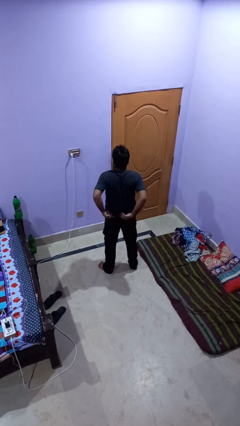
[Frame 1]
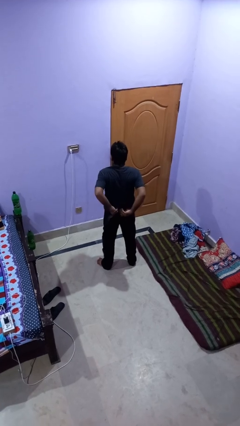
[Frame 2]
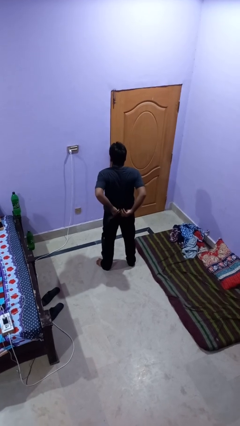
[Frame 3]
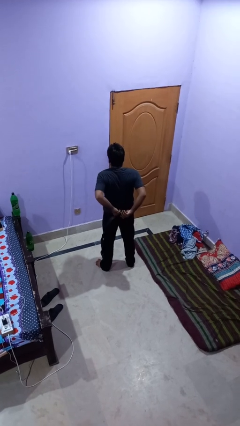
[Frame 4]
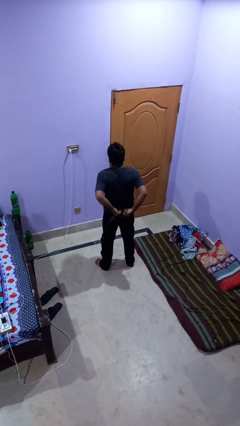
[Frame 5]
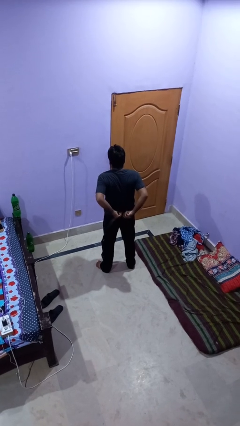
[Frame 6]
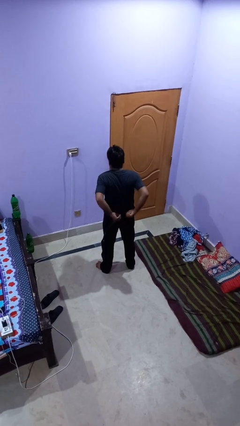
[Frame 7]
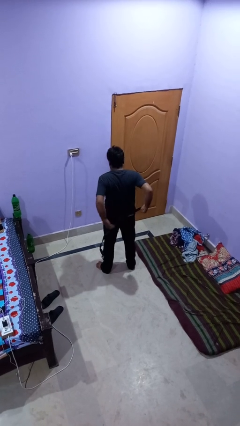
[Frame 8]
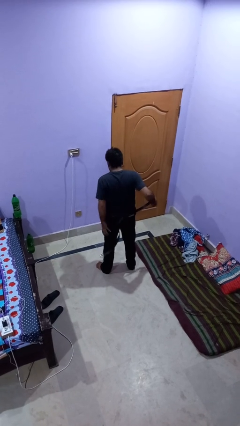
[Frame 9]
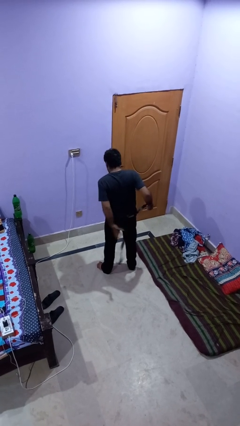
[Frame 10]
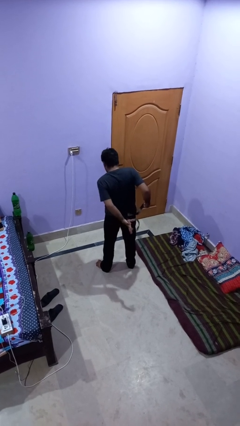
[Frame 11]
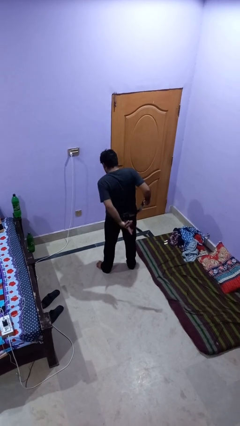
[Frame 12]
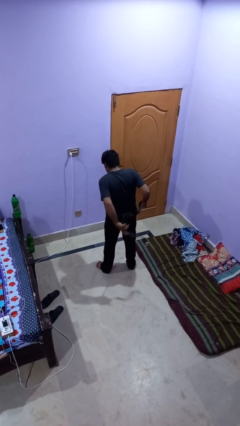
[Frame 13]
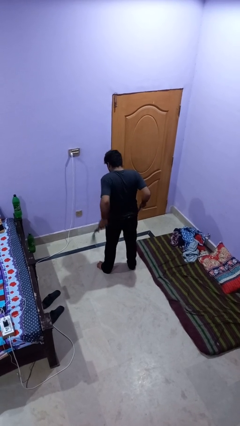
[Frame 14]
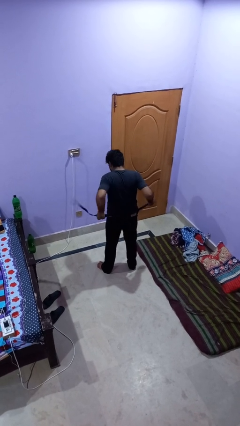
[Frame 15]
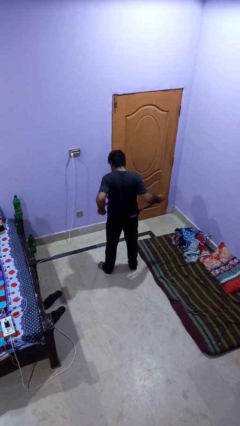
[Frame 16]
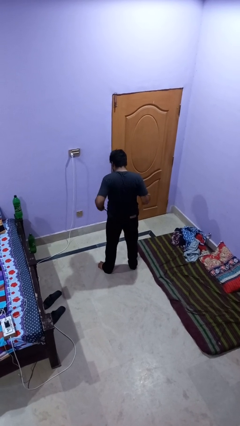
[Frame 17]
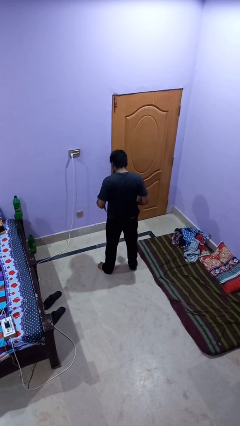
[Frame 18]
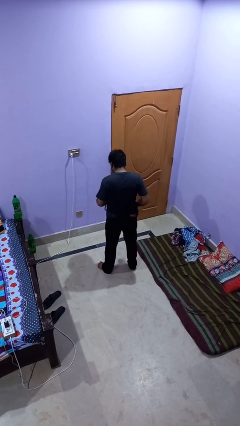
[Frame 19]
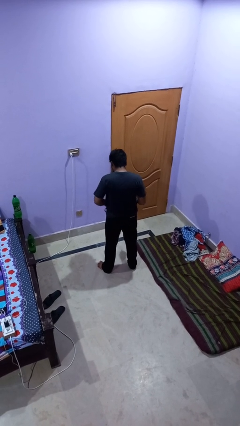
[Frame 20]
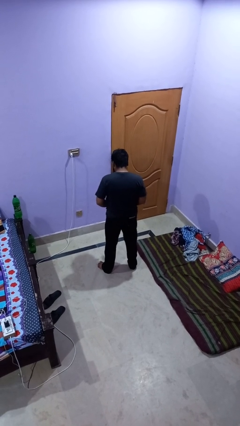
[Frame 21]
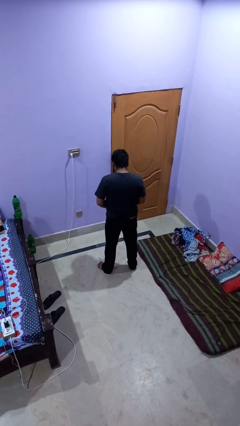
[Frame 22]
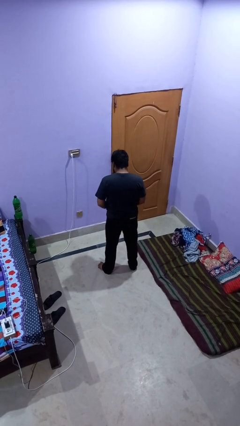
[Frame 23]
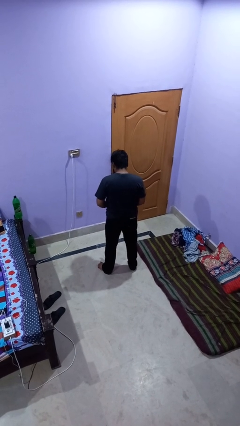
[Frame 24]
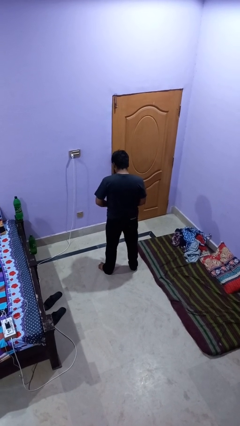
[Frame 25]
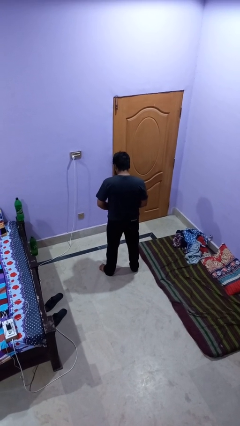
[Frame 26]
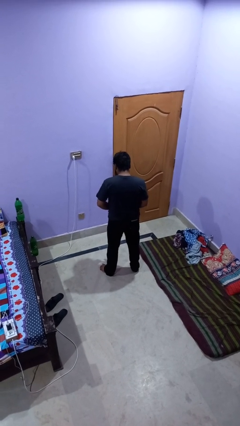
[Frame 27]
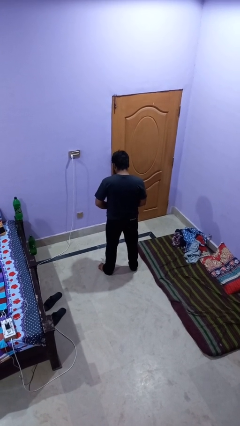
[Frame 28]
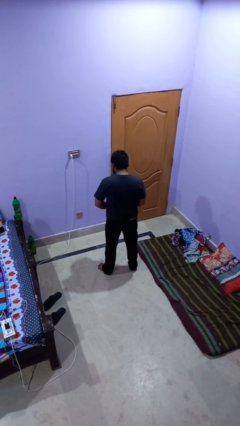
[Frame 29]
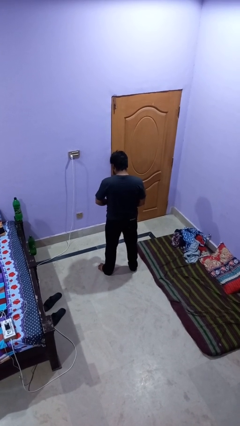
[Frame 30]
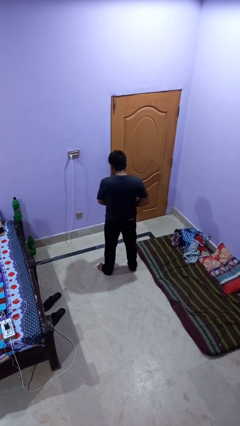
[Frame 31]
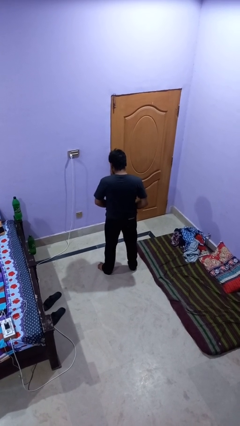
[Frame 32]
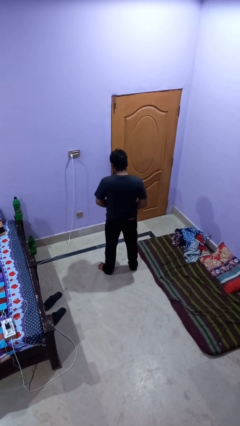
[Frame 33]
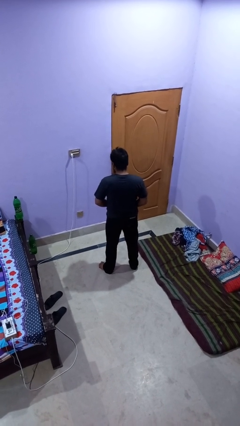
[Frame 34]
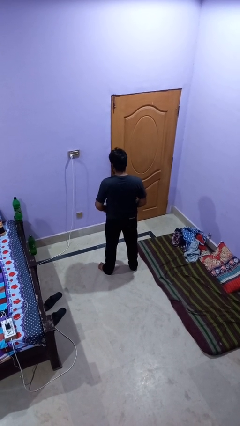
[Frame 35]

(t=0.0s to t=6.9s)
person puts on belt

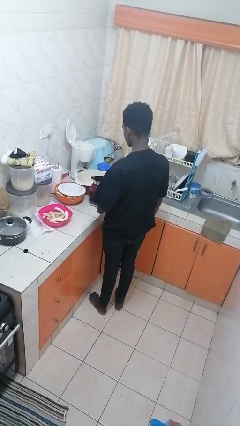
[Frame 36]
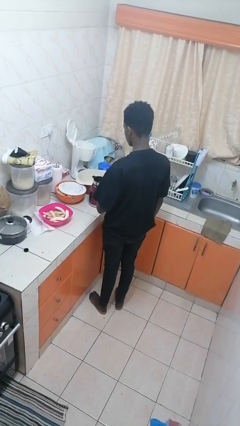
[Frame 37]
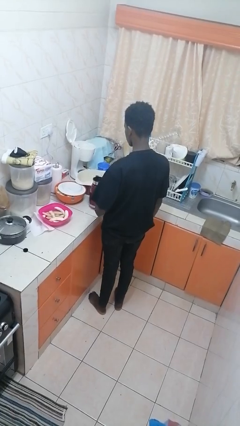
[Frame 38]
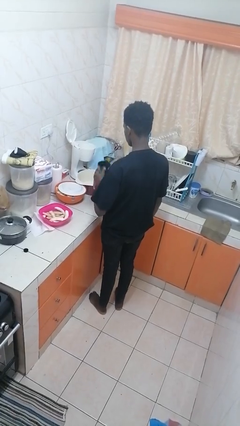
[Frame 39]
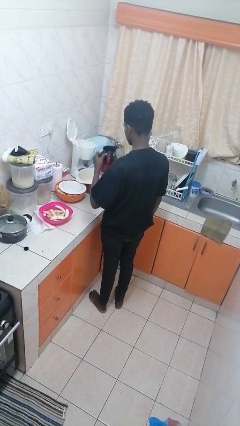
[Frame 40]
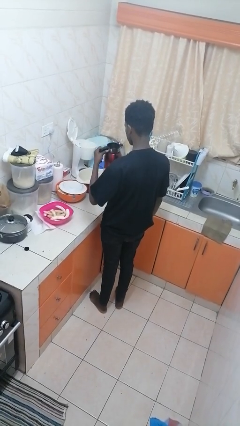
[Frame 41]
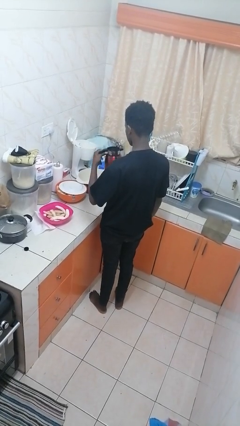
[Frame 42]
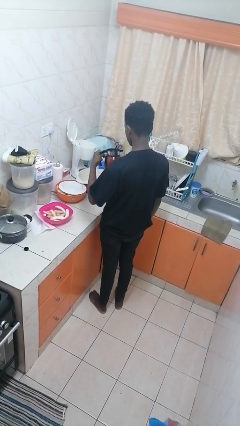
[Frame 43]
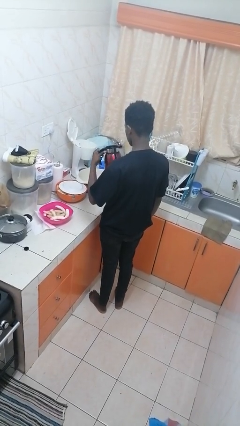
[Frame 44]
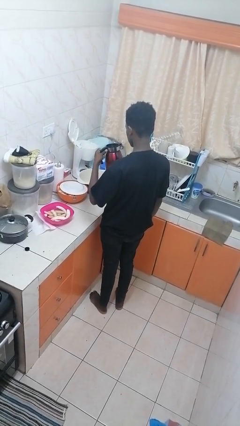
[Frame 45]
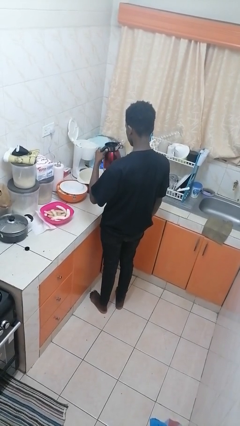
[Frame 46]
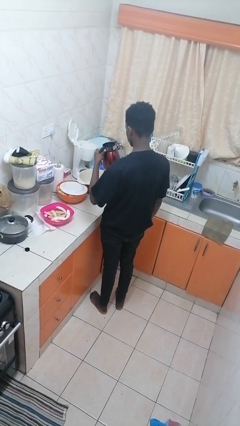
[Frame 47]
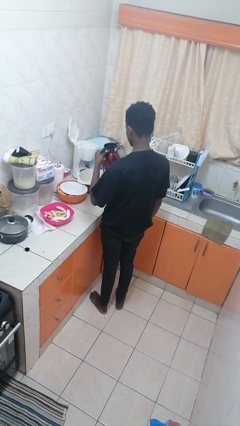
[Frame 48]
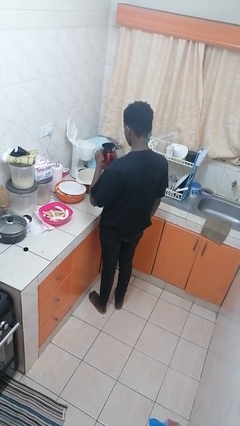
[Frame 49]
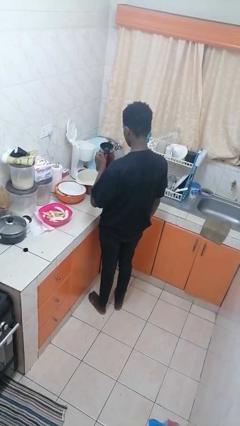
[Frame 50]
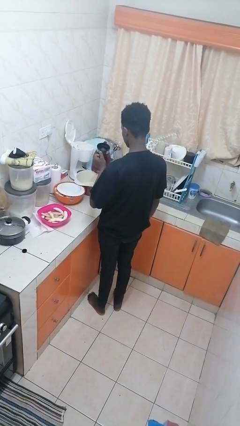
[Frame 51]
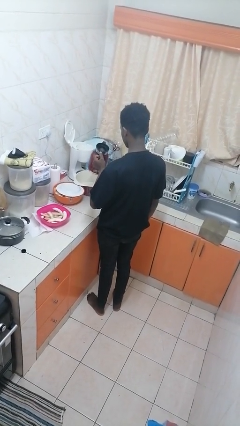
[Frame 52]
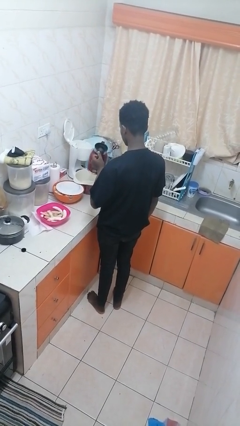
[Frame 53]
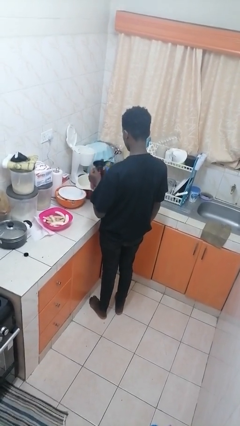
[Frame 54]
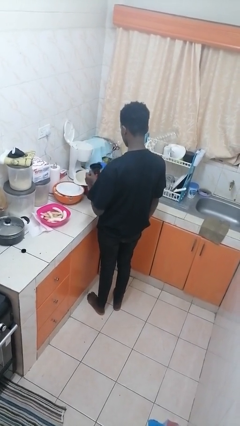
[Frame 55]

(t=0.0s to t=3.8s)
person picks up object from countertop

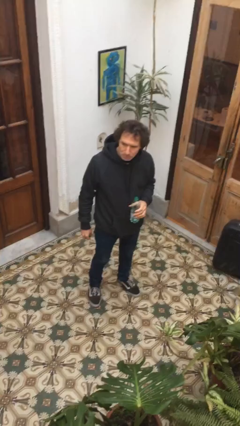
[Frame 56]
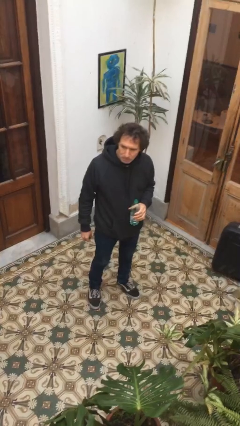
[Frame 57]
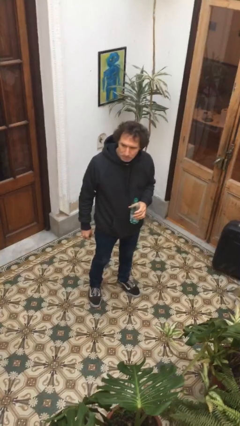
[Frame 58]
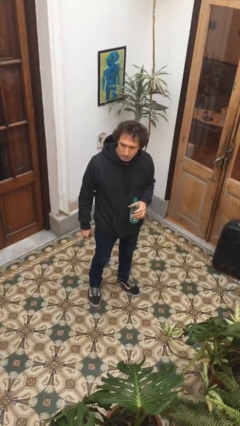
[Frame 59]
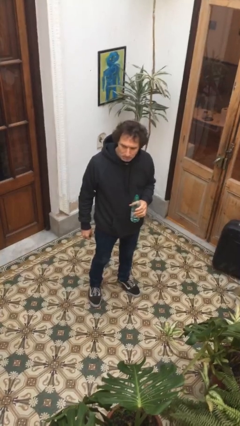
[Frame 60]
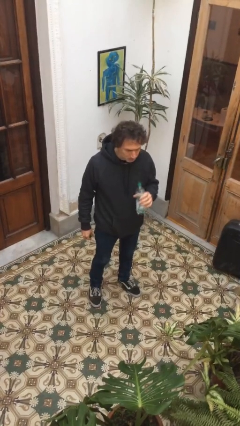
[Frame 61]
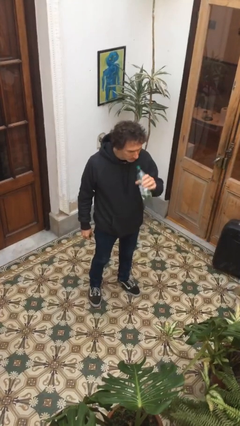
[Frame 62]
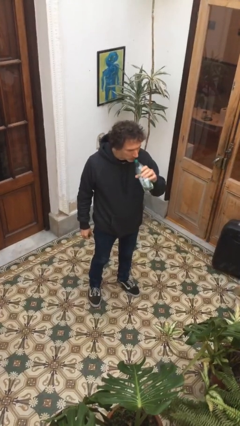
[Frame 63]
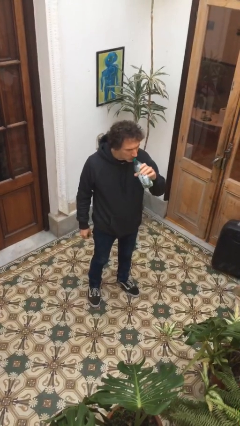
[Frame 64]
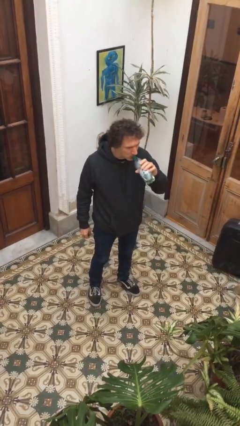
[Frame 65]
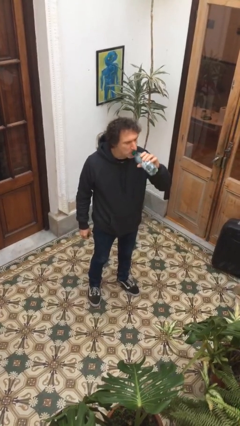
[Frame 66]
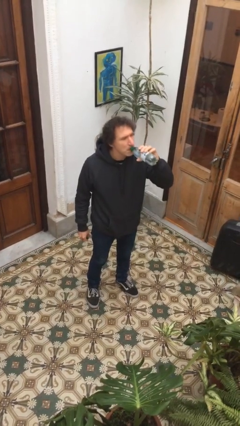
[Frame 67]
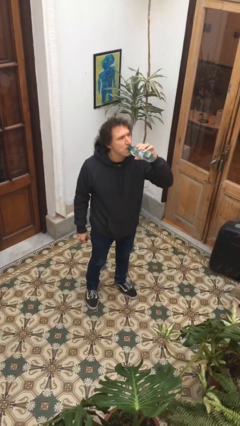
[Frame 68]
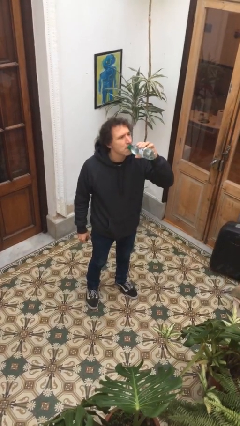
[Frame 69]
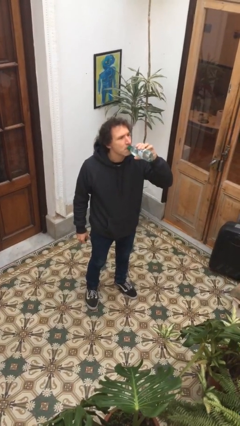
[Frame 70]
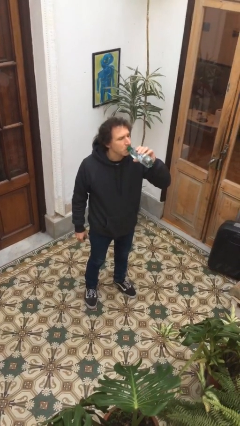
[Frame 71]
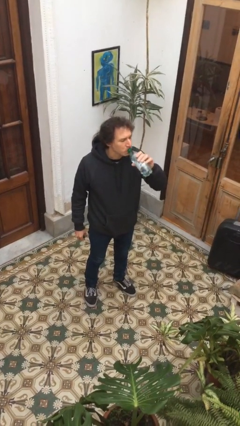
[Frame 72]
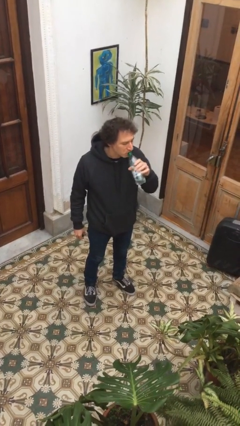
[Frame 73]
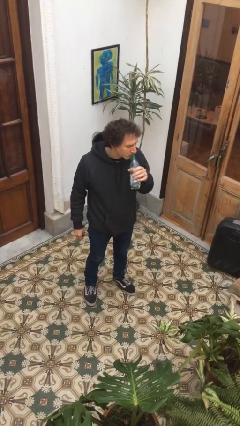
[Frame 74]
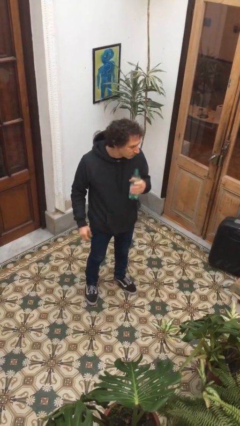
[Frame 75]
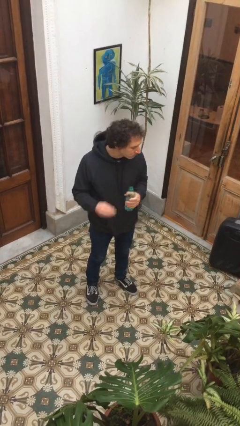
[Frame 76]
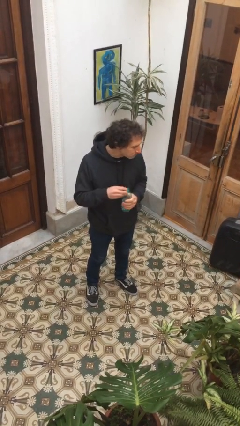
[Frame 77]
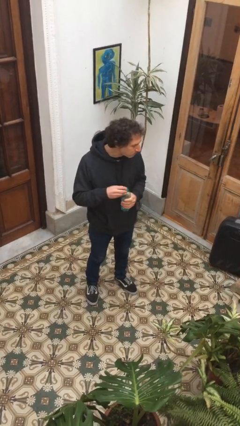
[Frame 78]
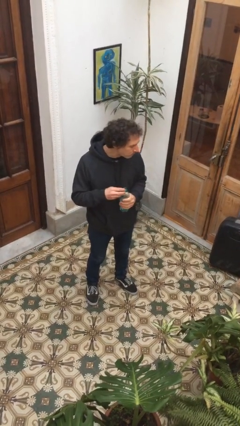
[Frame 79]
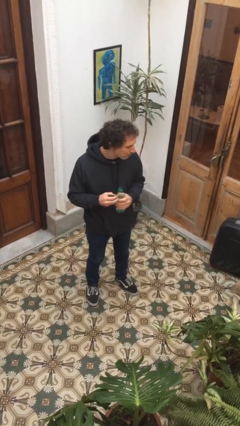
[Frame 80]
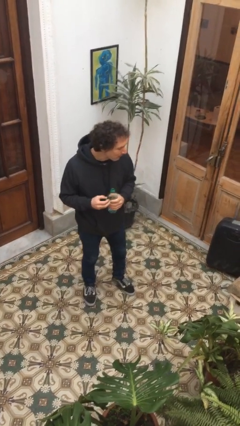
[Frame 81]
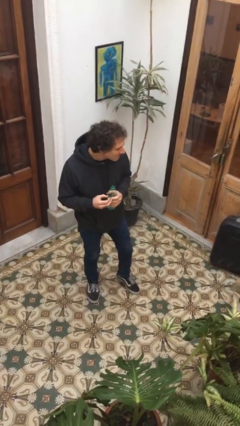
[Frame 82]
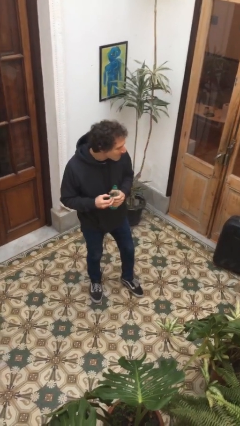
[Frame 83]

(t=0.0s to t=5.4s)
person drinks from bottle

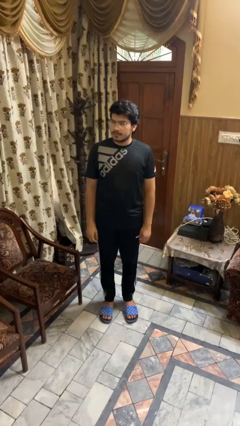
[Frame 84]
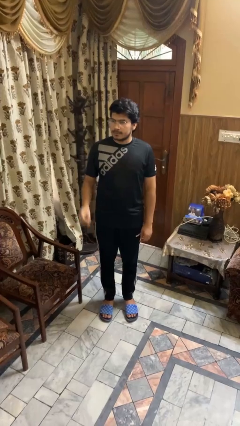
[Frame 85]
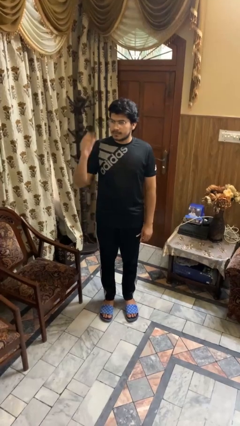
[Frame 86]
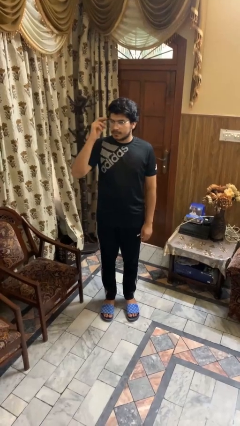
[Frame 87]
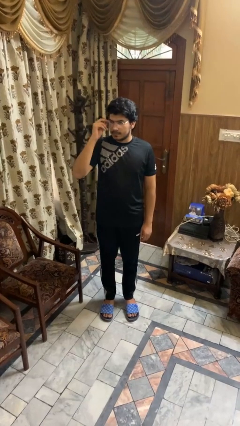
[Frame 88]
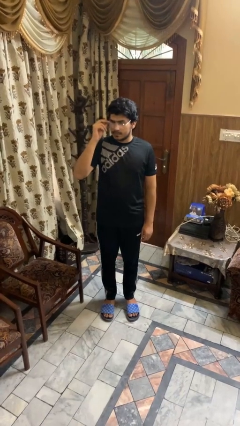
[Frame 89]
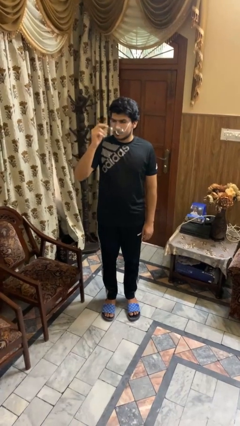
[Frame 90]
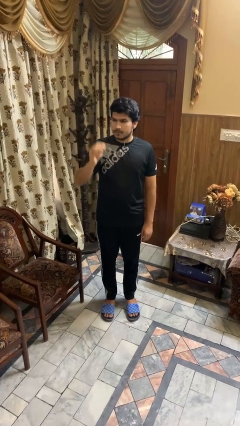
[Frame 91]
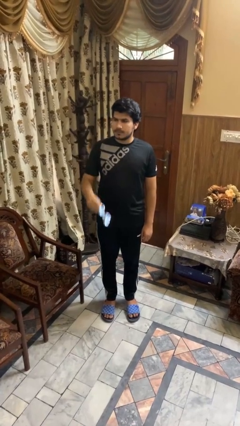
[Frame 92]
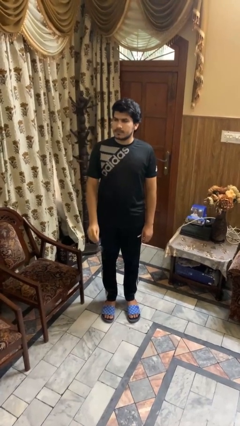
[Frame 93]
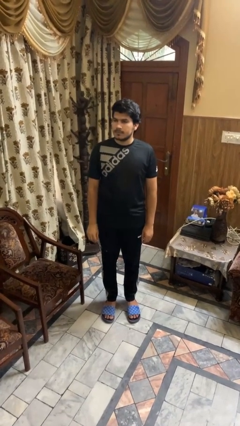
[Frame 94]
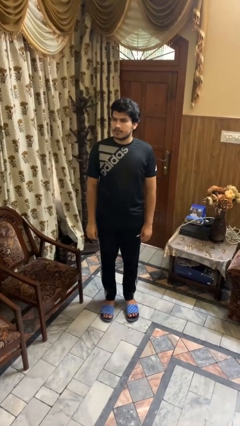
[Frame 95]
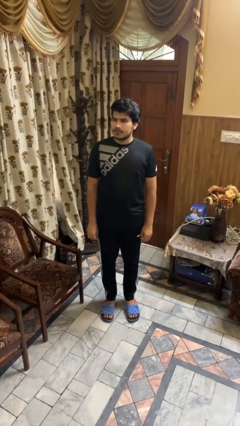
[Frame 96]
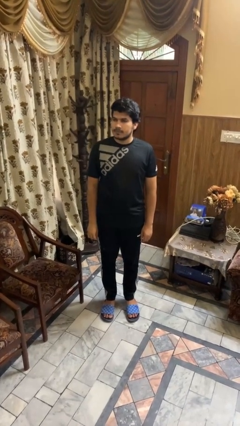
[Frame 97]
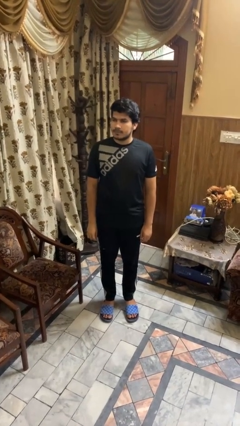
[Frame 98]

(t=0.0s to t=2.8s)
person takes off glasses
